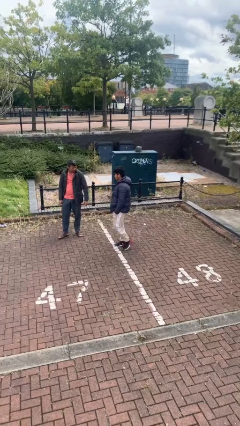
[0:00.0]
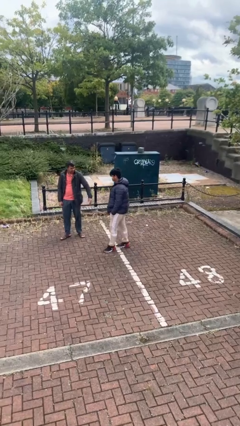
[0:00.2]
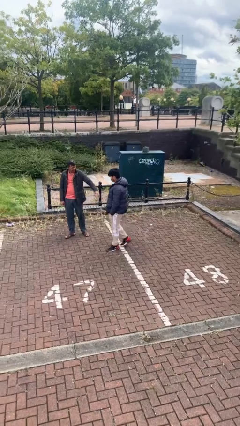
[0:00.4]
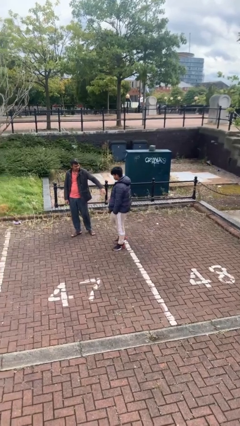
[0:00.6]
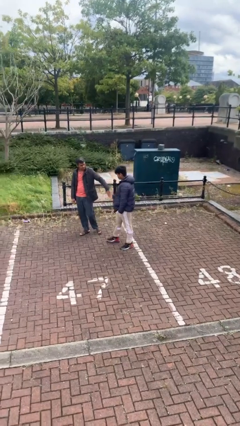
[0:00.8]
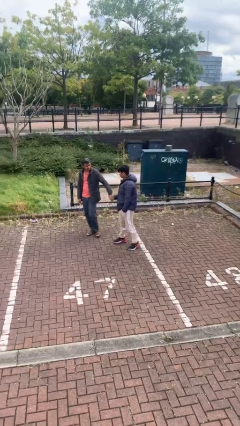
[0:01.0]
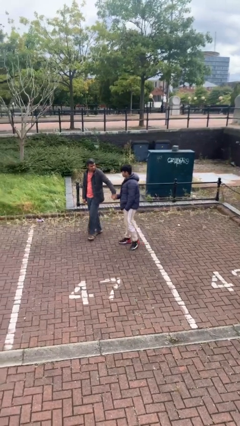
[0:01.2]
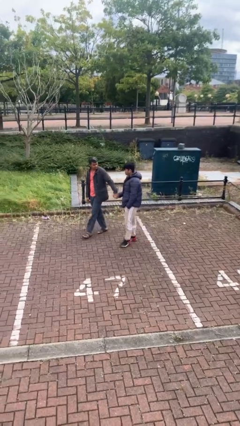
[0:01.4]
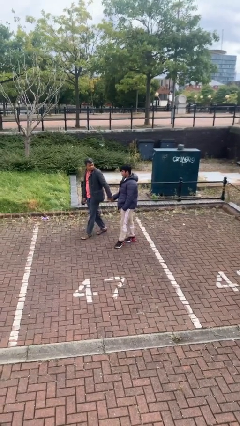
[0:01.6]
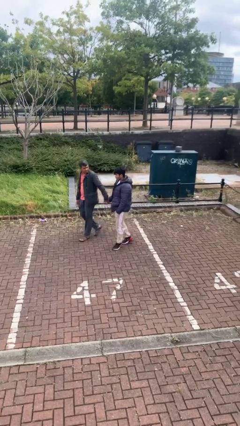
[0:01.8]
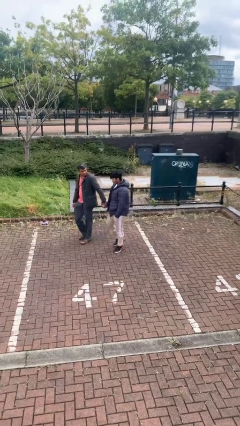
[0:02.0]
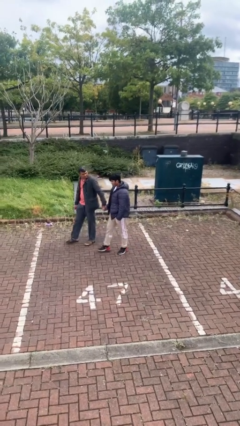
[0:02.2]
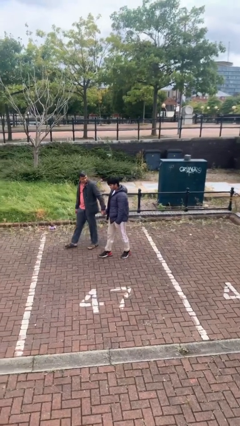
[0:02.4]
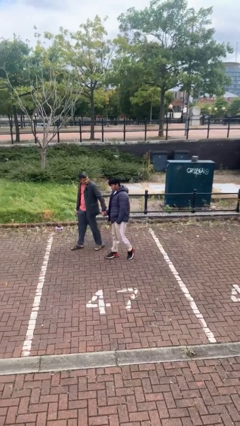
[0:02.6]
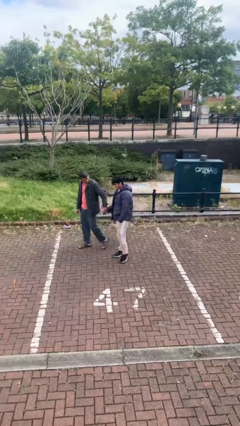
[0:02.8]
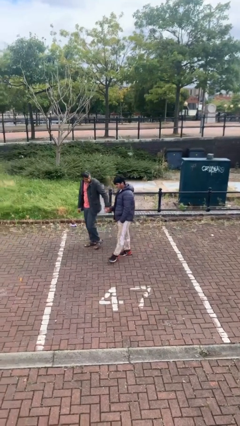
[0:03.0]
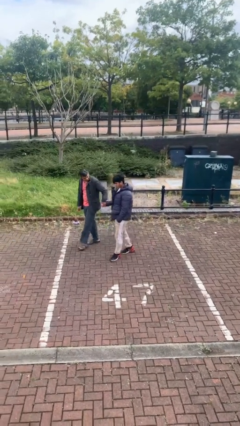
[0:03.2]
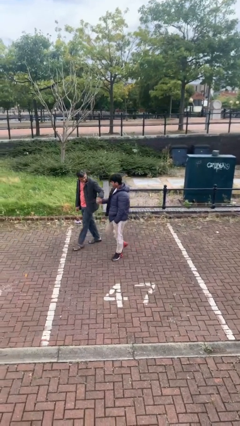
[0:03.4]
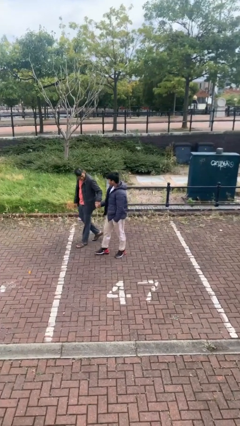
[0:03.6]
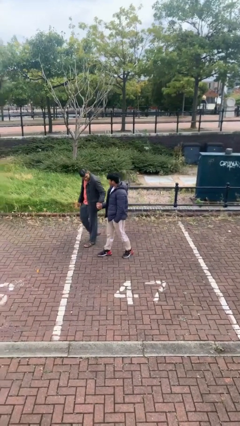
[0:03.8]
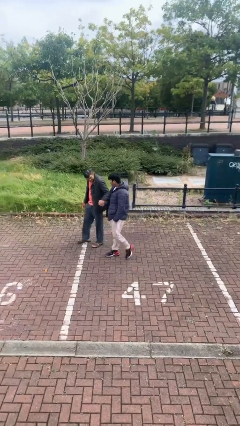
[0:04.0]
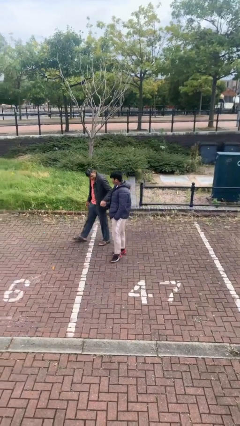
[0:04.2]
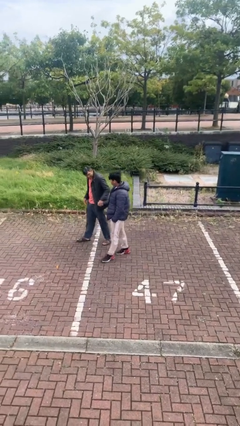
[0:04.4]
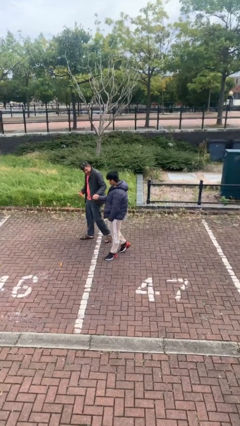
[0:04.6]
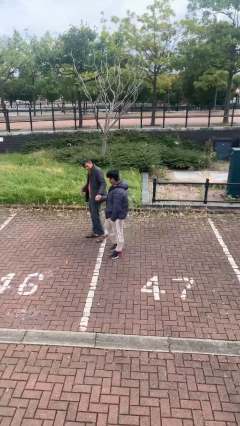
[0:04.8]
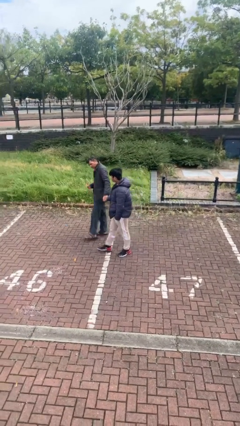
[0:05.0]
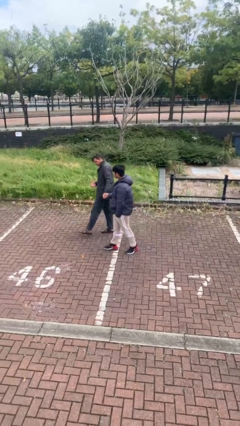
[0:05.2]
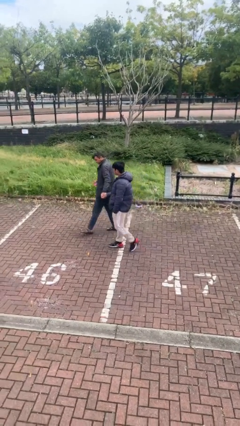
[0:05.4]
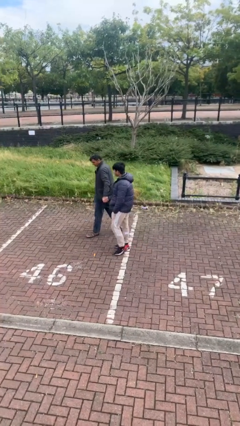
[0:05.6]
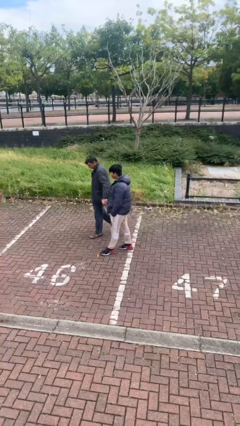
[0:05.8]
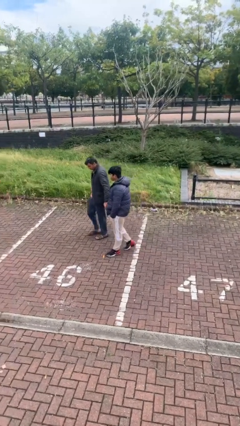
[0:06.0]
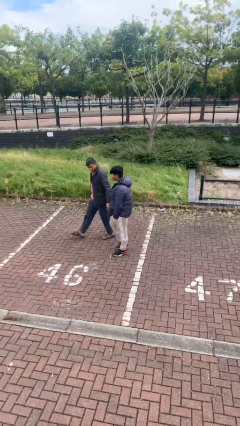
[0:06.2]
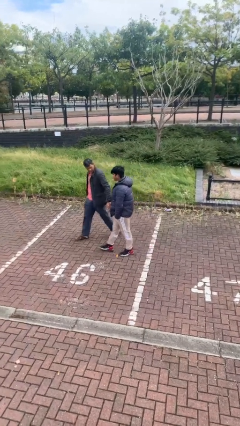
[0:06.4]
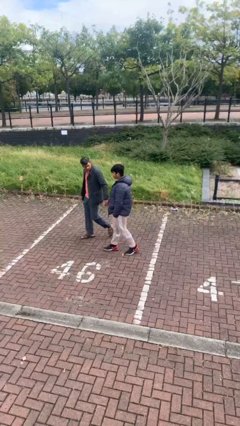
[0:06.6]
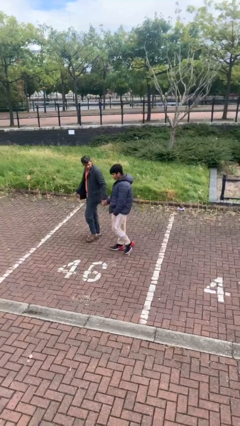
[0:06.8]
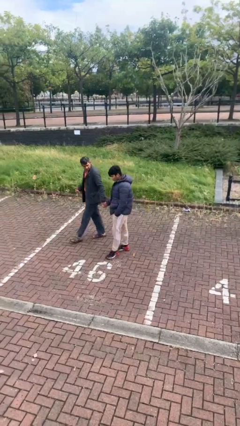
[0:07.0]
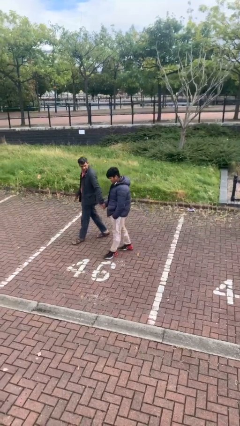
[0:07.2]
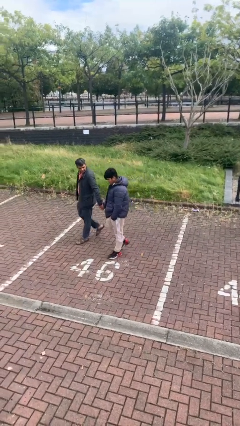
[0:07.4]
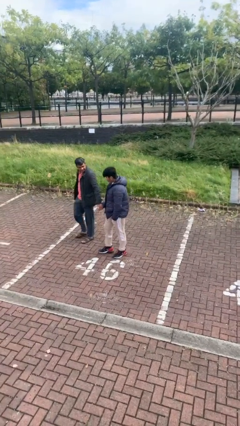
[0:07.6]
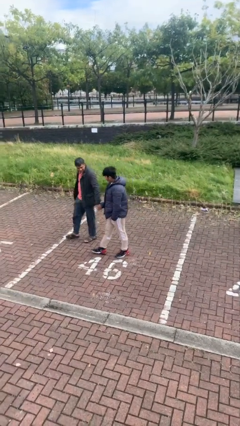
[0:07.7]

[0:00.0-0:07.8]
person holds hand

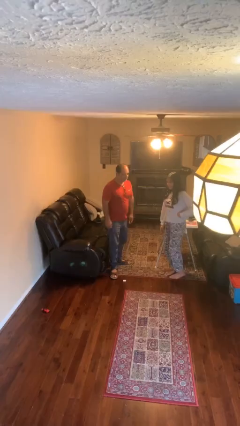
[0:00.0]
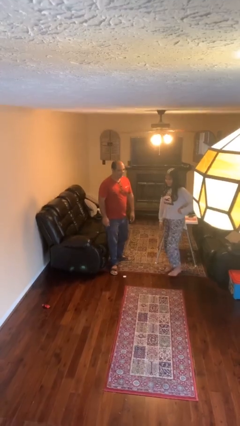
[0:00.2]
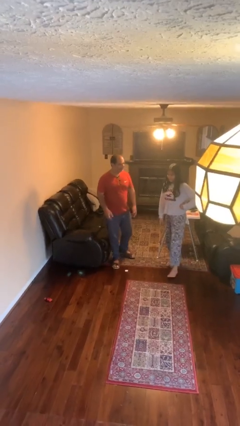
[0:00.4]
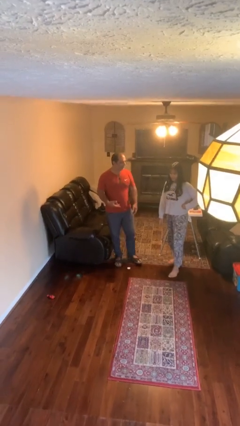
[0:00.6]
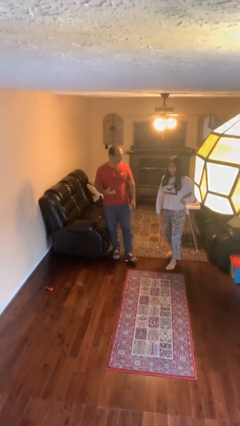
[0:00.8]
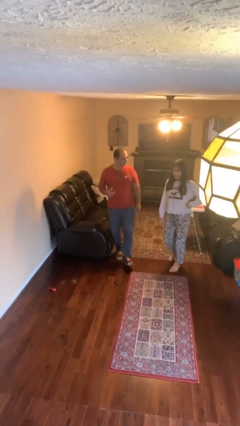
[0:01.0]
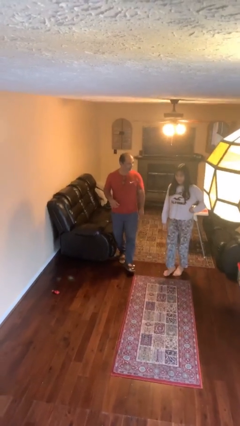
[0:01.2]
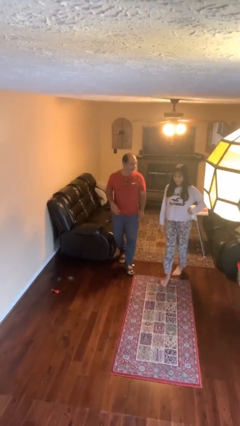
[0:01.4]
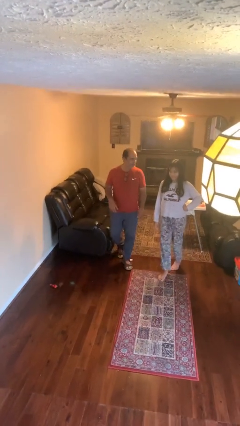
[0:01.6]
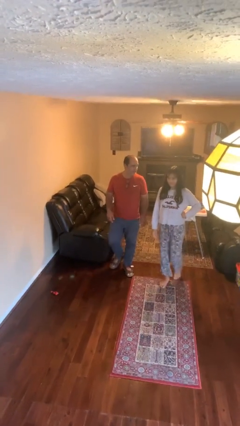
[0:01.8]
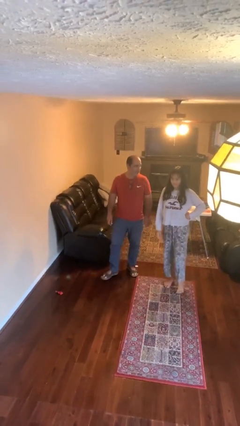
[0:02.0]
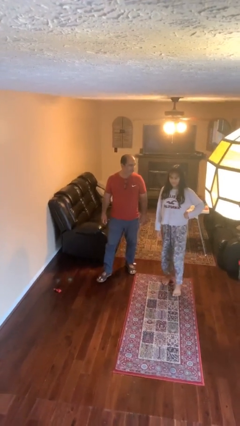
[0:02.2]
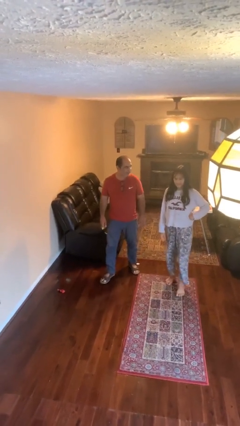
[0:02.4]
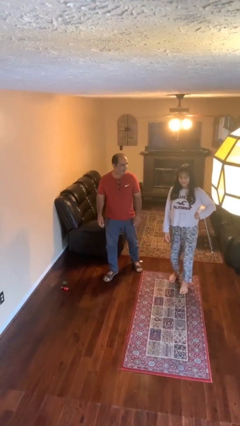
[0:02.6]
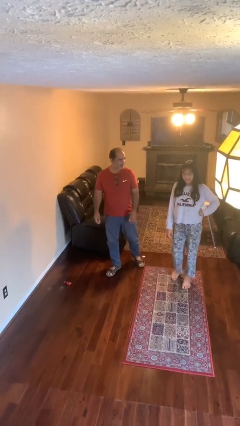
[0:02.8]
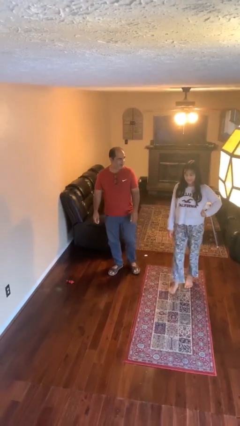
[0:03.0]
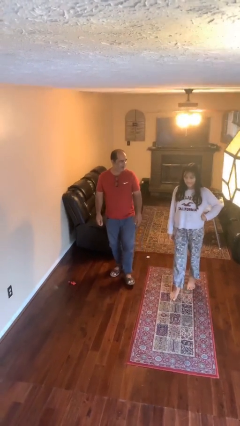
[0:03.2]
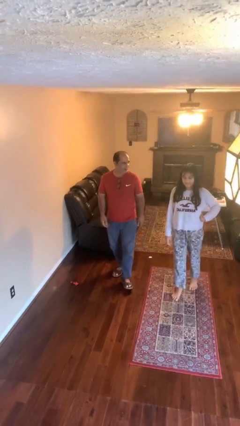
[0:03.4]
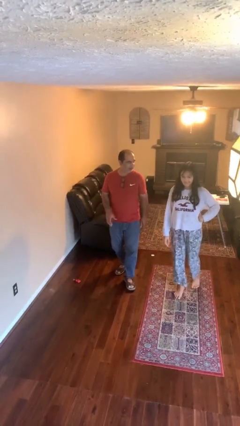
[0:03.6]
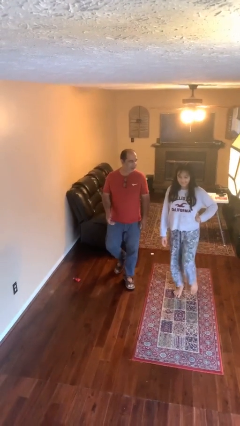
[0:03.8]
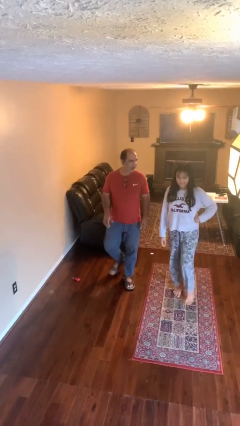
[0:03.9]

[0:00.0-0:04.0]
person talks to person

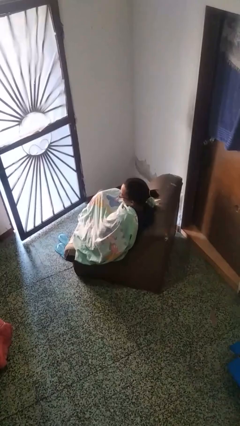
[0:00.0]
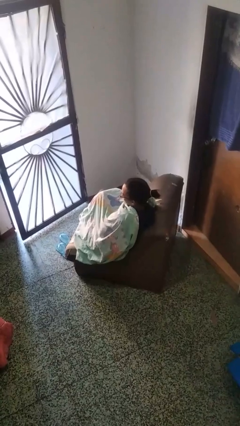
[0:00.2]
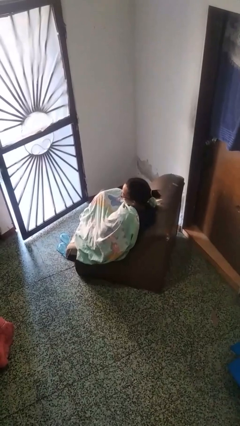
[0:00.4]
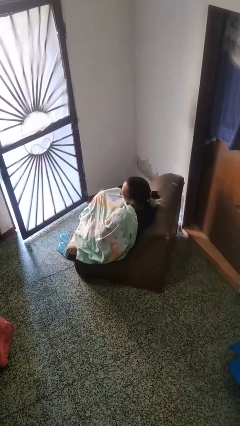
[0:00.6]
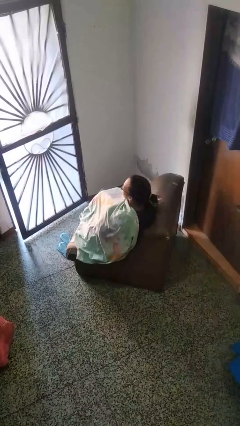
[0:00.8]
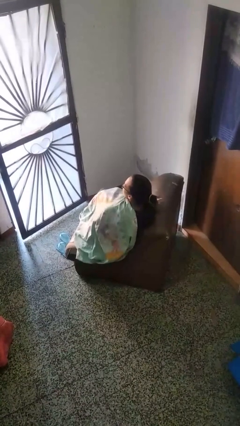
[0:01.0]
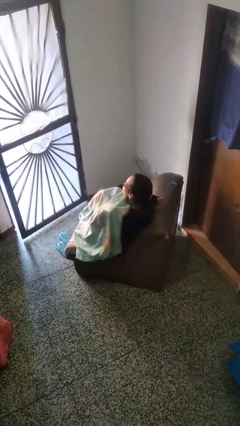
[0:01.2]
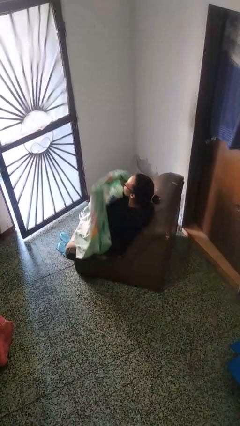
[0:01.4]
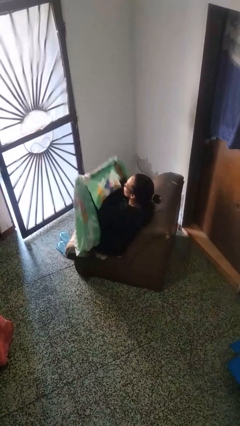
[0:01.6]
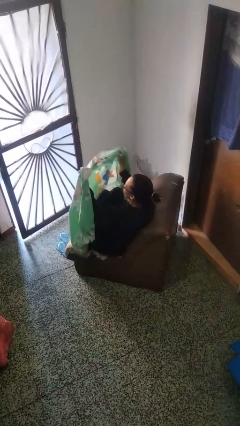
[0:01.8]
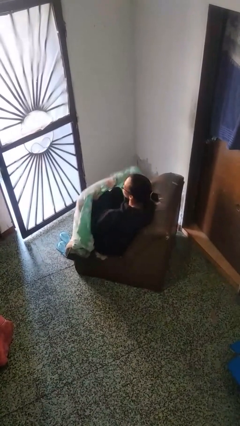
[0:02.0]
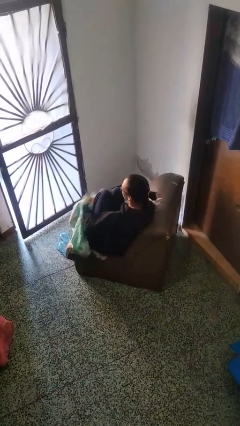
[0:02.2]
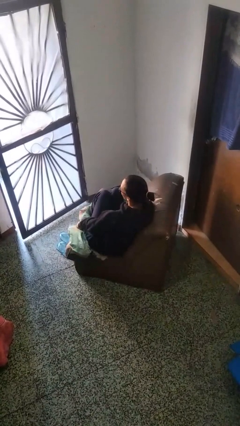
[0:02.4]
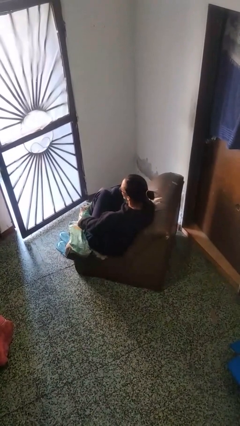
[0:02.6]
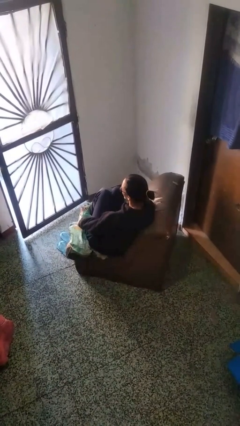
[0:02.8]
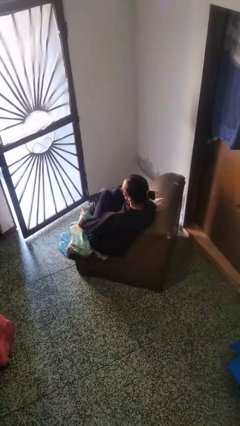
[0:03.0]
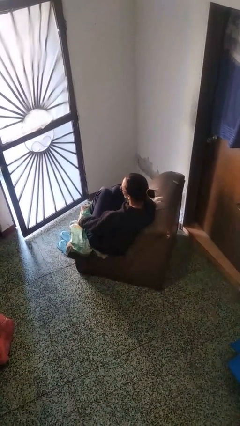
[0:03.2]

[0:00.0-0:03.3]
person uncovers with blanket

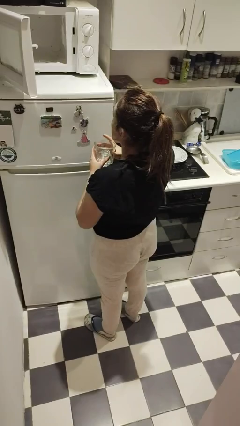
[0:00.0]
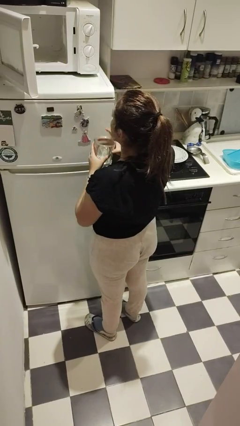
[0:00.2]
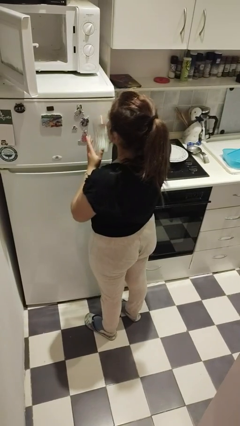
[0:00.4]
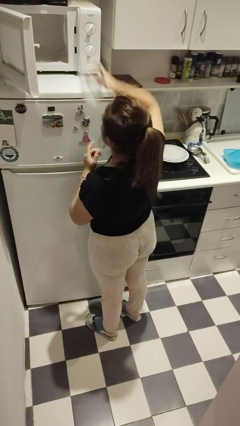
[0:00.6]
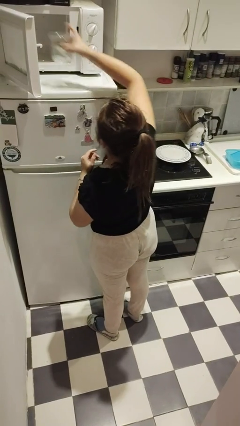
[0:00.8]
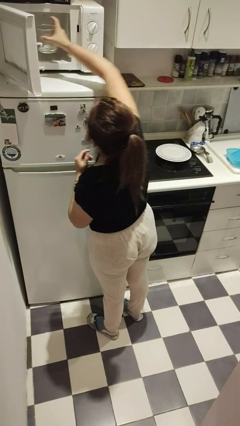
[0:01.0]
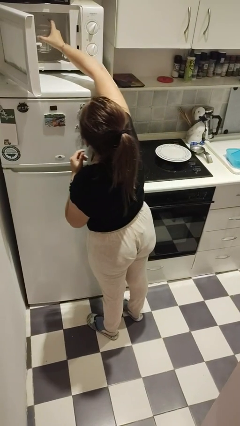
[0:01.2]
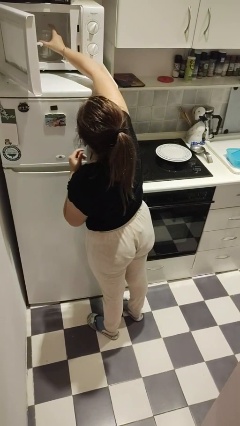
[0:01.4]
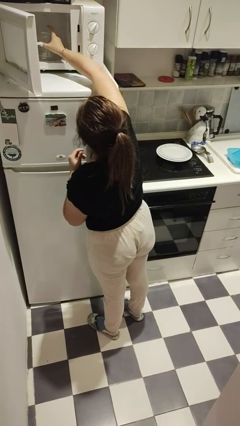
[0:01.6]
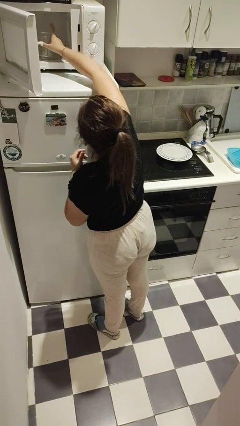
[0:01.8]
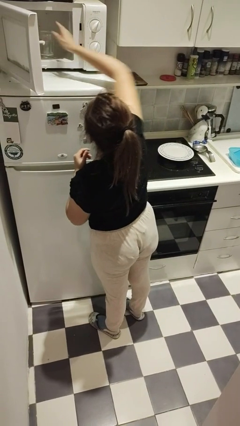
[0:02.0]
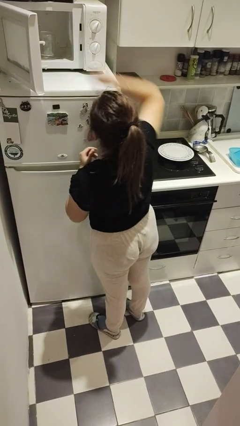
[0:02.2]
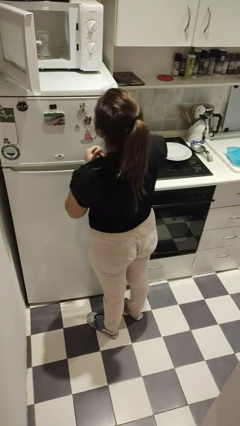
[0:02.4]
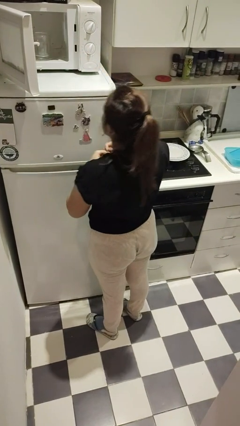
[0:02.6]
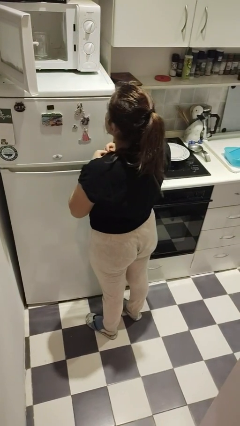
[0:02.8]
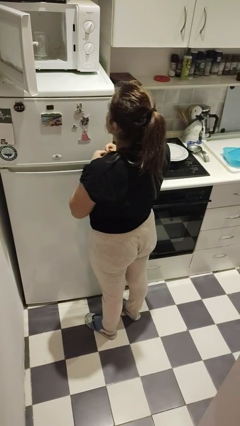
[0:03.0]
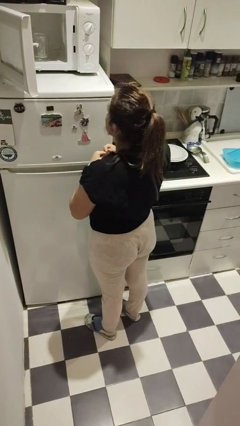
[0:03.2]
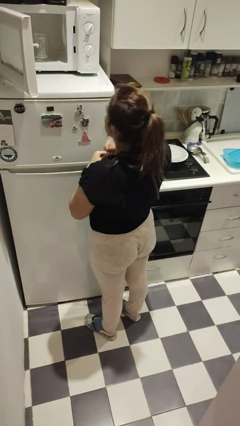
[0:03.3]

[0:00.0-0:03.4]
person puts object into microwave
